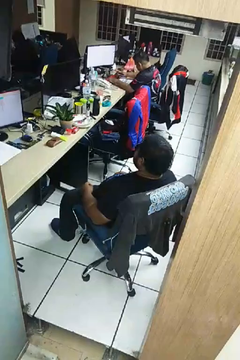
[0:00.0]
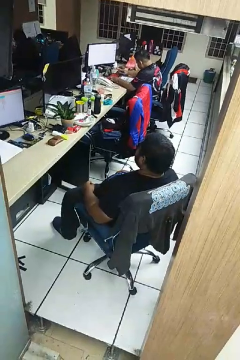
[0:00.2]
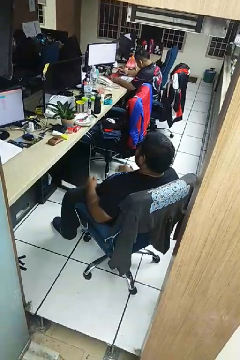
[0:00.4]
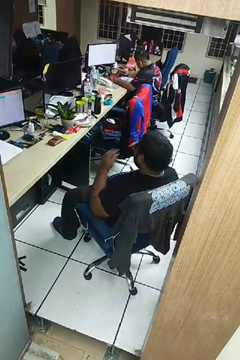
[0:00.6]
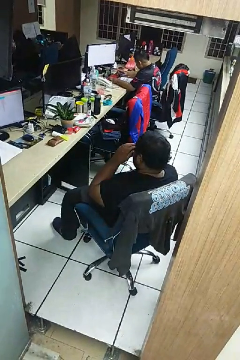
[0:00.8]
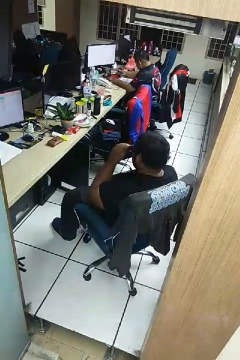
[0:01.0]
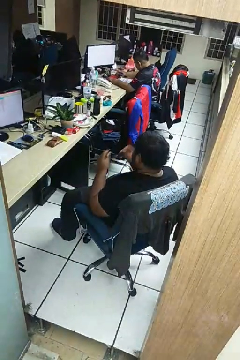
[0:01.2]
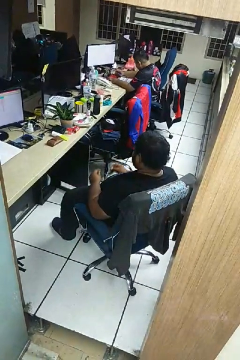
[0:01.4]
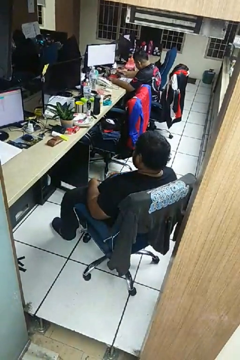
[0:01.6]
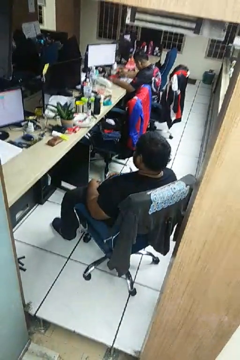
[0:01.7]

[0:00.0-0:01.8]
person takes off sunglasses

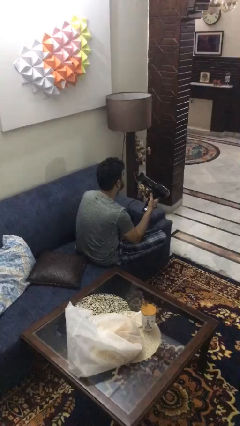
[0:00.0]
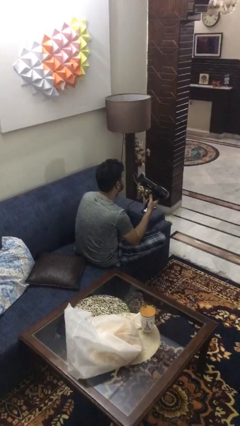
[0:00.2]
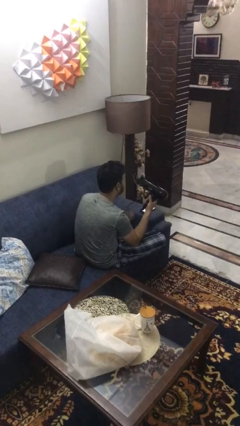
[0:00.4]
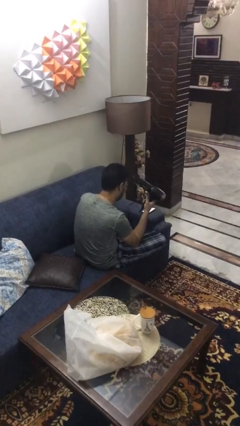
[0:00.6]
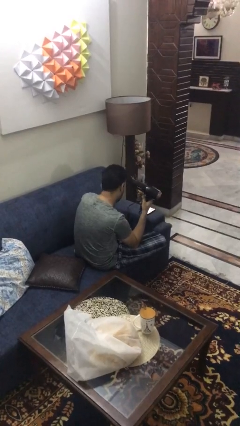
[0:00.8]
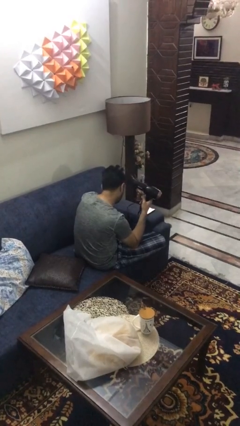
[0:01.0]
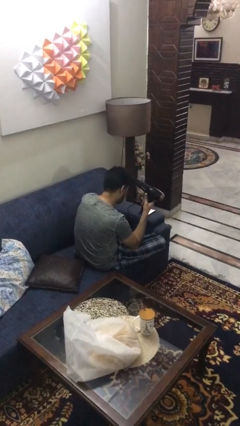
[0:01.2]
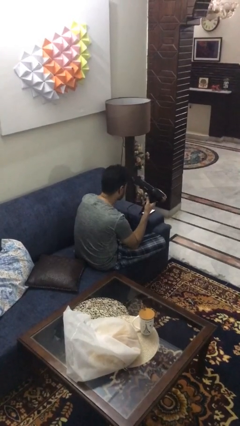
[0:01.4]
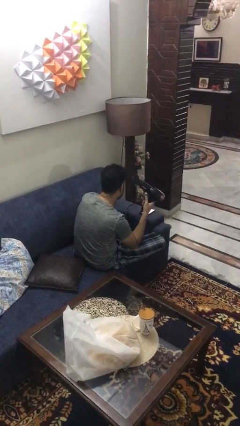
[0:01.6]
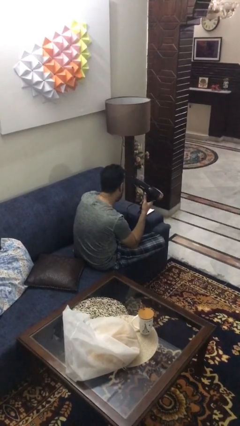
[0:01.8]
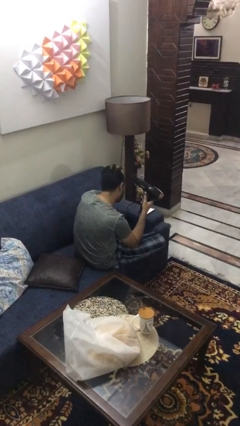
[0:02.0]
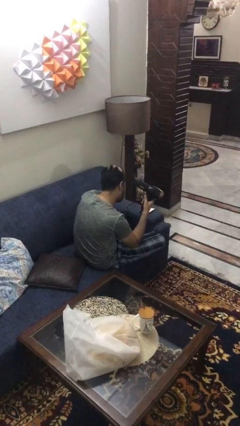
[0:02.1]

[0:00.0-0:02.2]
person dries hair with hairdryer

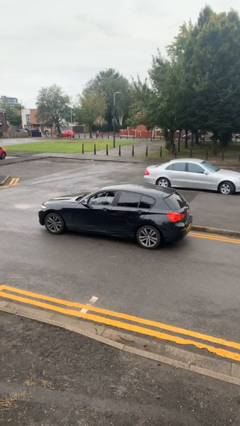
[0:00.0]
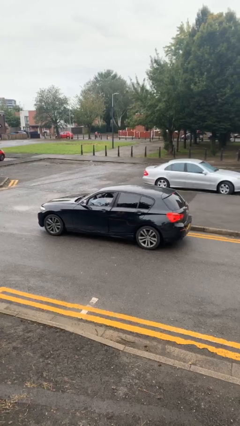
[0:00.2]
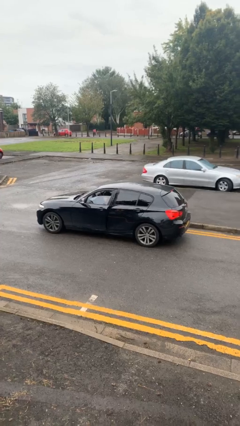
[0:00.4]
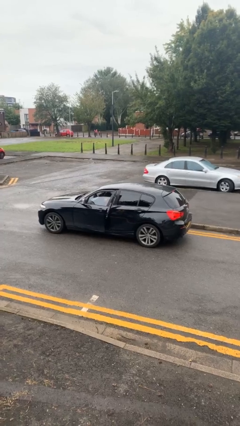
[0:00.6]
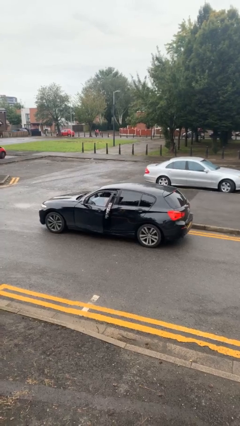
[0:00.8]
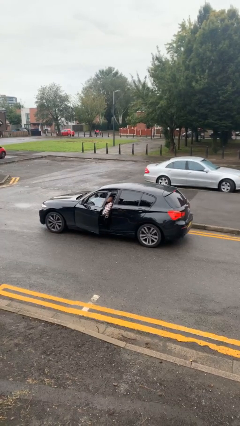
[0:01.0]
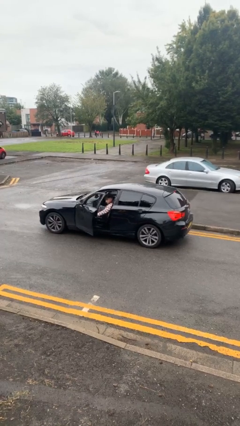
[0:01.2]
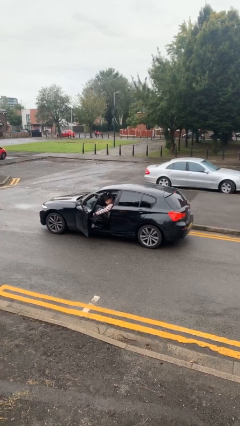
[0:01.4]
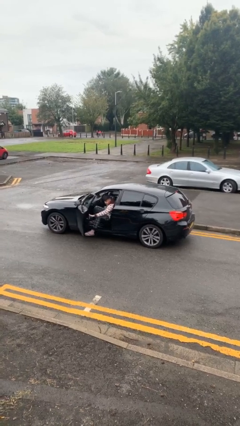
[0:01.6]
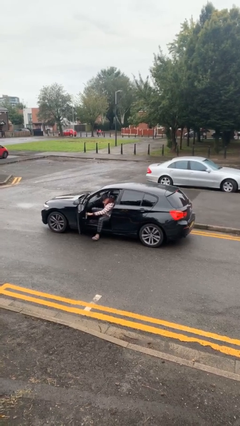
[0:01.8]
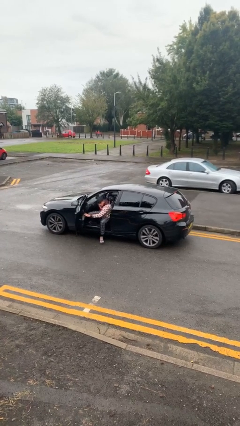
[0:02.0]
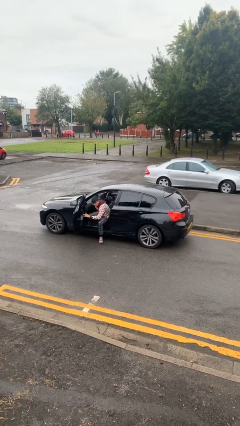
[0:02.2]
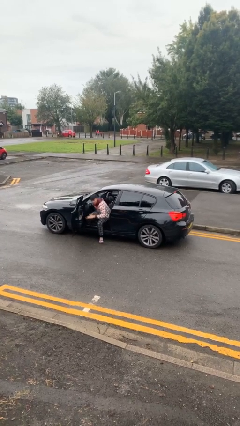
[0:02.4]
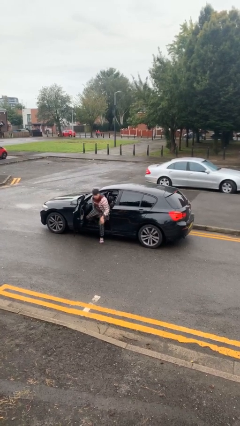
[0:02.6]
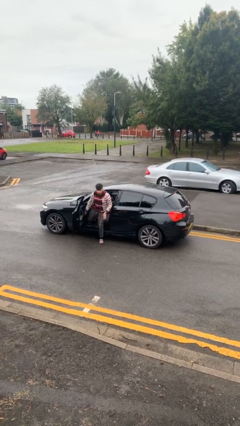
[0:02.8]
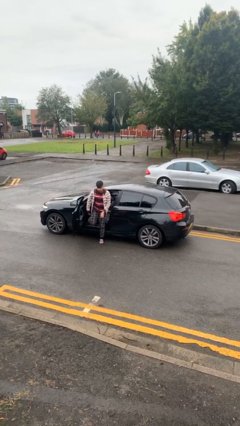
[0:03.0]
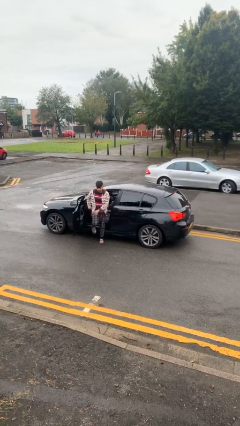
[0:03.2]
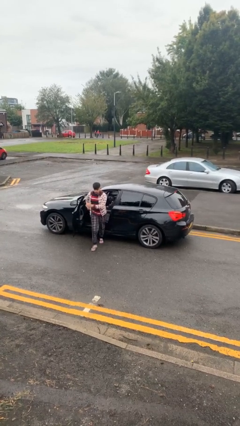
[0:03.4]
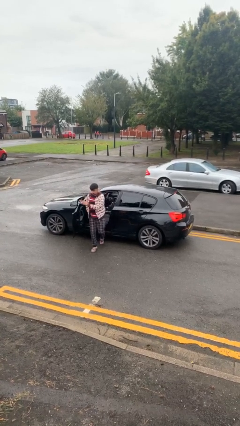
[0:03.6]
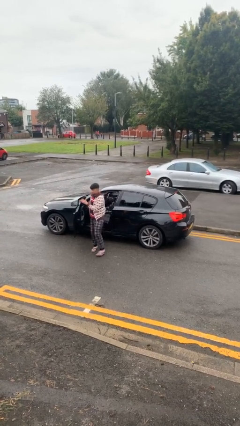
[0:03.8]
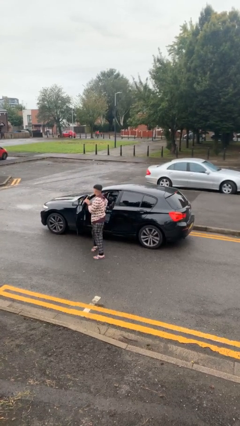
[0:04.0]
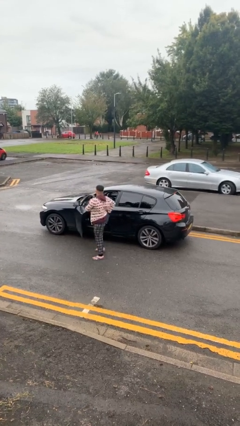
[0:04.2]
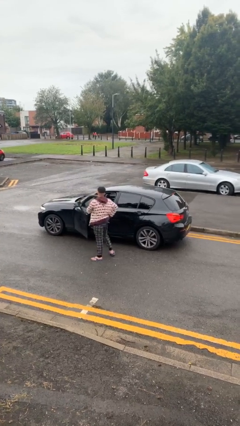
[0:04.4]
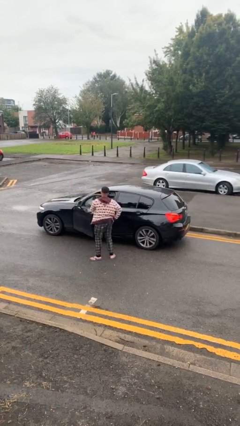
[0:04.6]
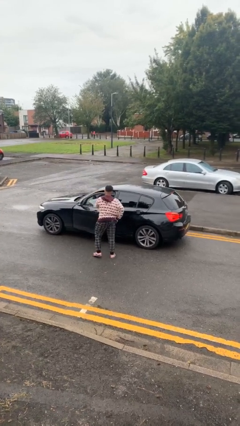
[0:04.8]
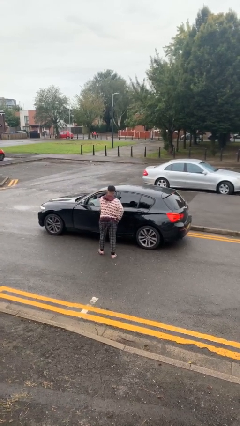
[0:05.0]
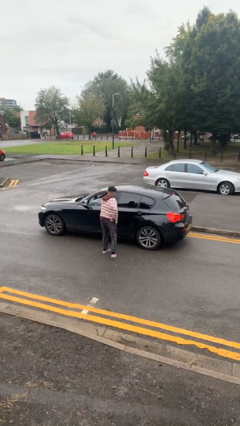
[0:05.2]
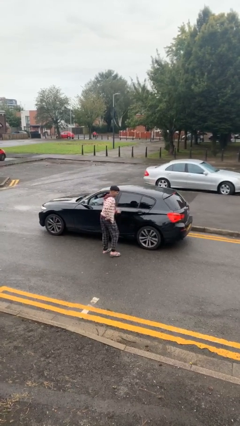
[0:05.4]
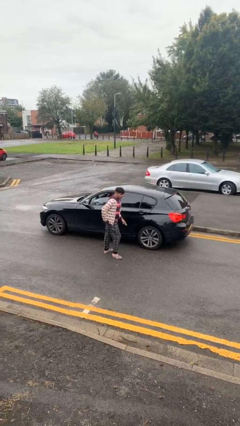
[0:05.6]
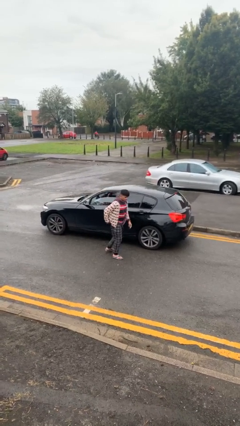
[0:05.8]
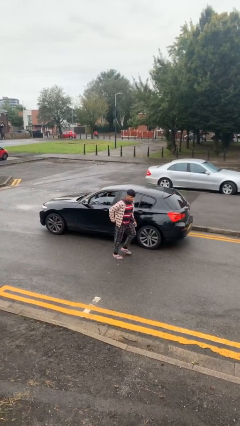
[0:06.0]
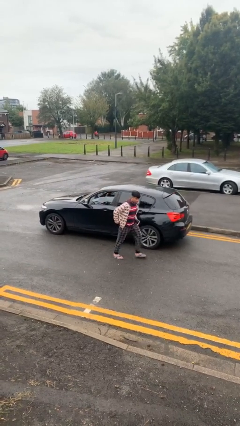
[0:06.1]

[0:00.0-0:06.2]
car drops off person

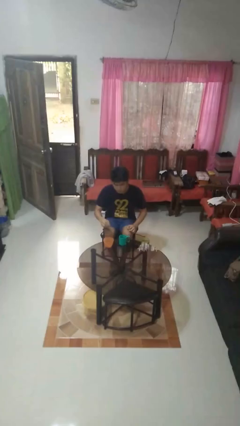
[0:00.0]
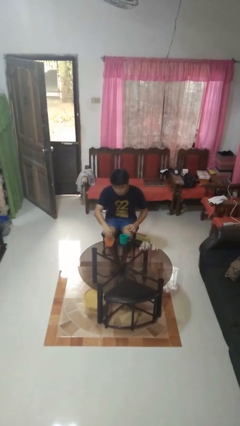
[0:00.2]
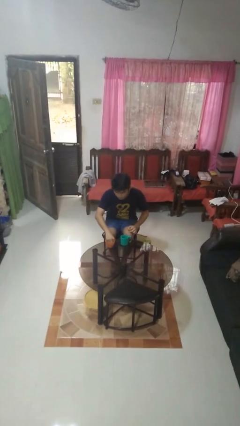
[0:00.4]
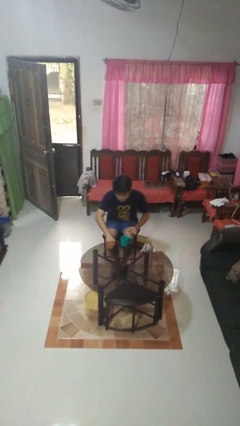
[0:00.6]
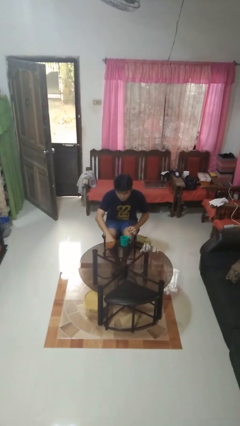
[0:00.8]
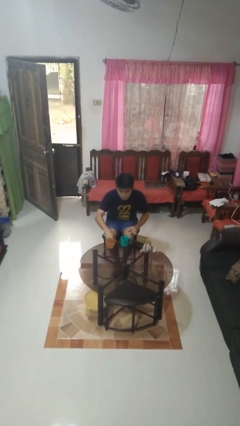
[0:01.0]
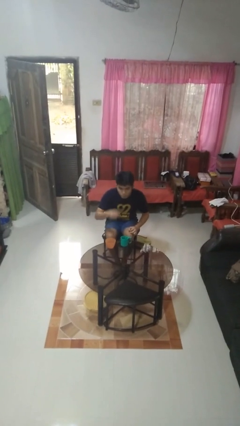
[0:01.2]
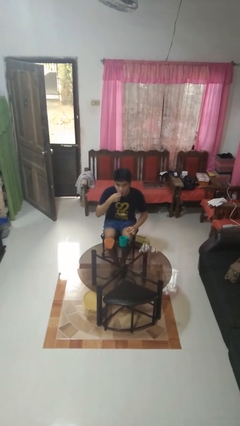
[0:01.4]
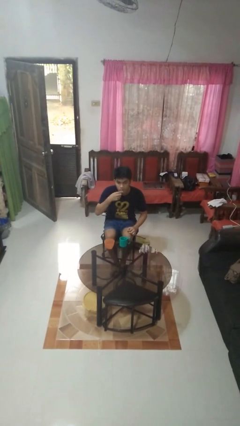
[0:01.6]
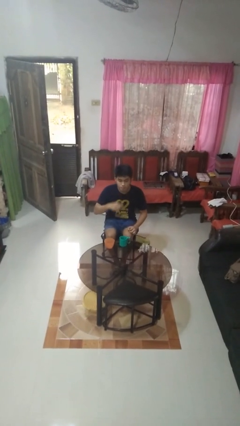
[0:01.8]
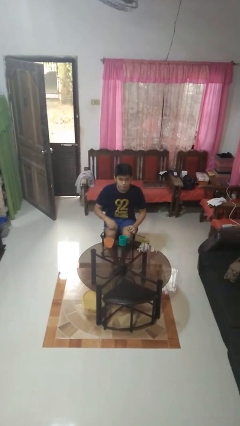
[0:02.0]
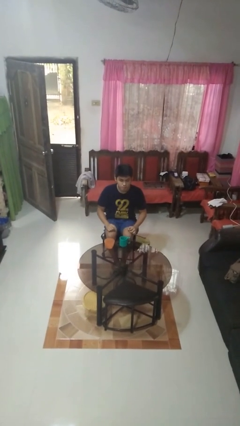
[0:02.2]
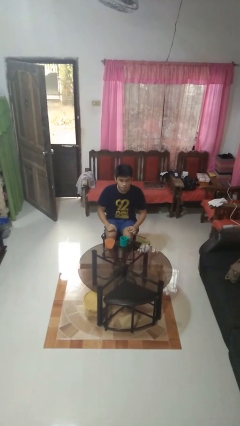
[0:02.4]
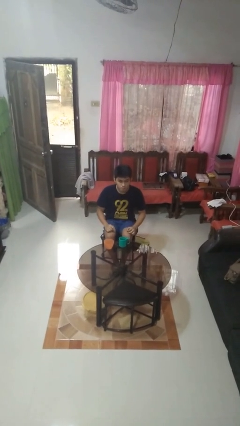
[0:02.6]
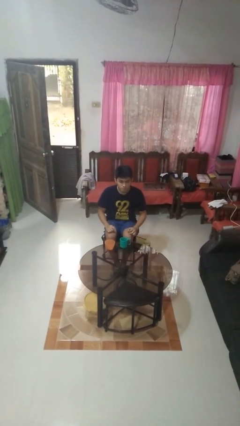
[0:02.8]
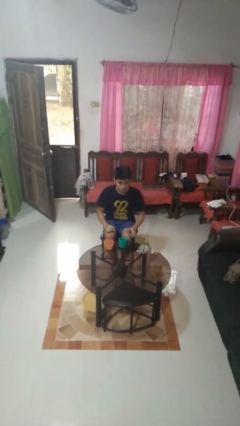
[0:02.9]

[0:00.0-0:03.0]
person takes medicine pills

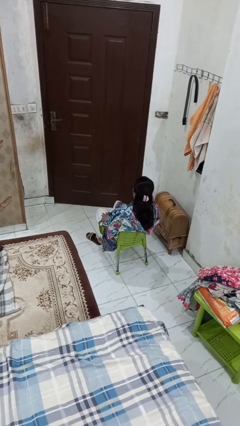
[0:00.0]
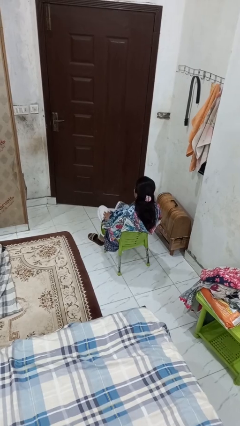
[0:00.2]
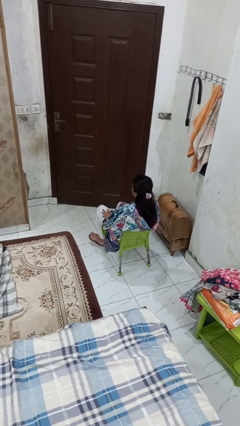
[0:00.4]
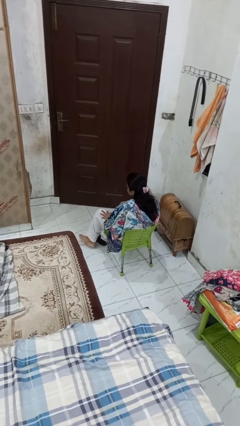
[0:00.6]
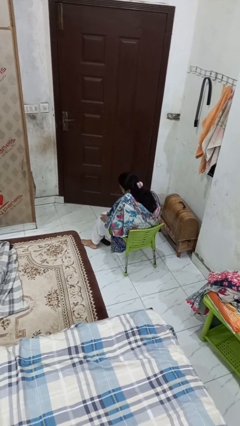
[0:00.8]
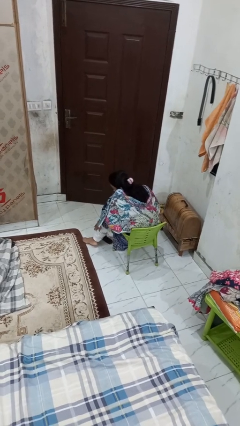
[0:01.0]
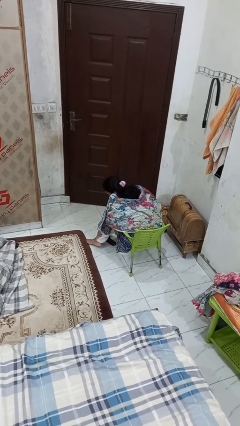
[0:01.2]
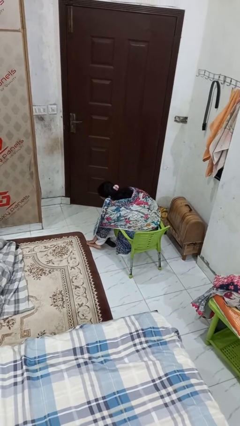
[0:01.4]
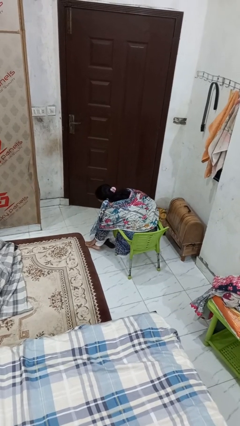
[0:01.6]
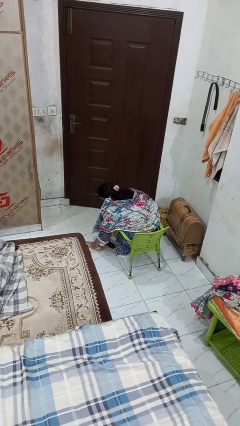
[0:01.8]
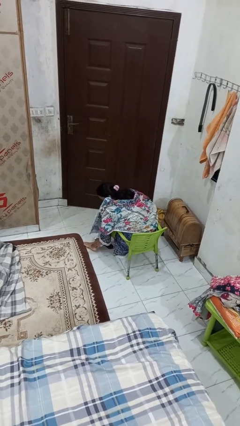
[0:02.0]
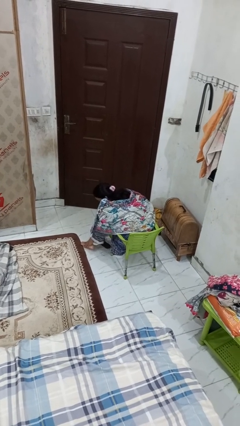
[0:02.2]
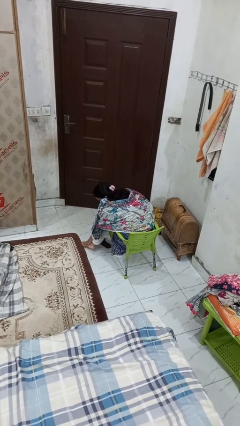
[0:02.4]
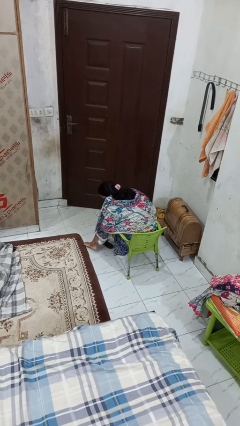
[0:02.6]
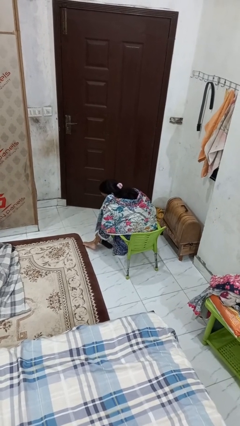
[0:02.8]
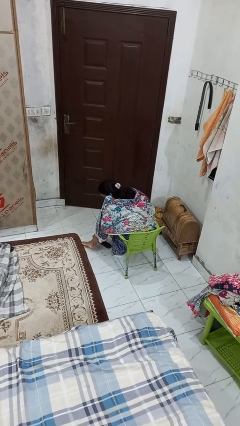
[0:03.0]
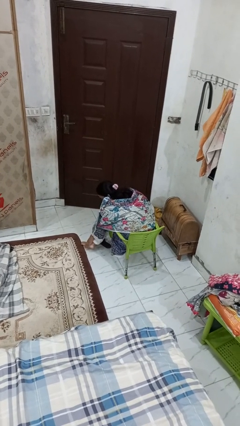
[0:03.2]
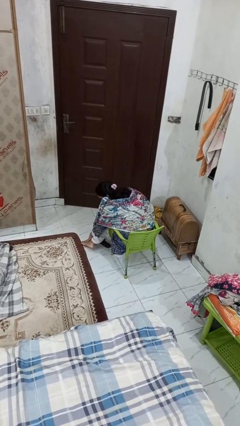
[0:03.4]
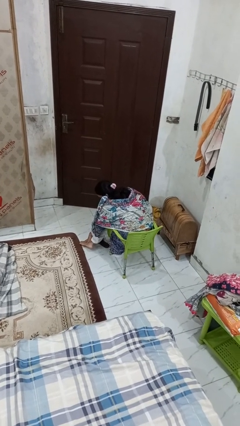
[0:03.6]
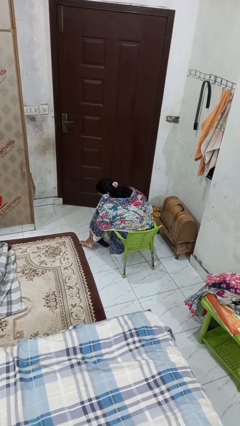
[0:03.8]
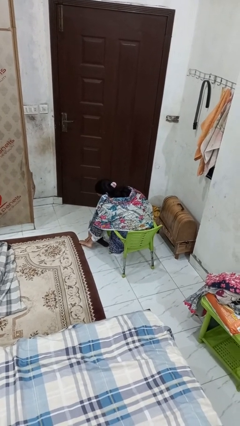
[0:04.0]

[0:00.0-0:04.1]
person rubs foot

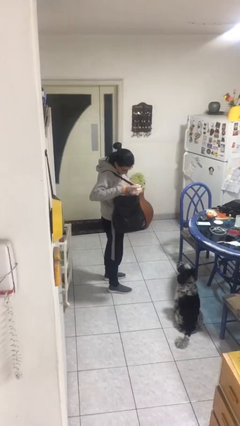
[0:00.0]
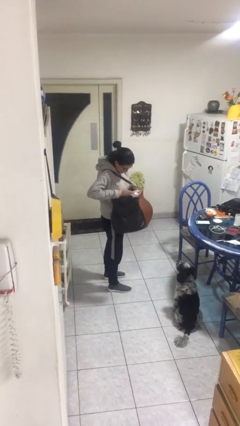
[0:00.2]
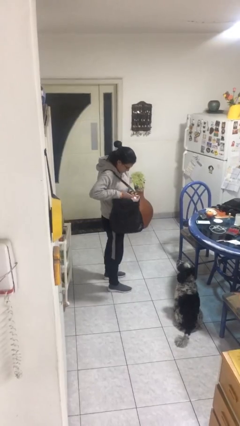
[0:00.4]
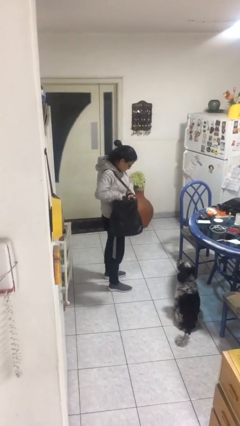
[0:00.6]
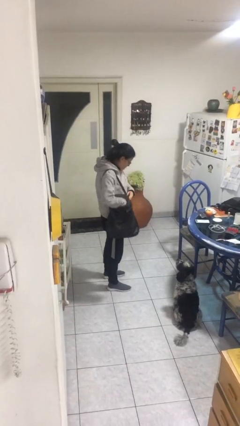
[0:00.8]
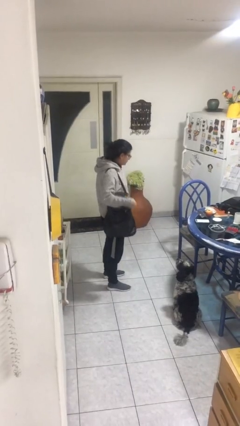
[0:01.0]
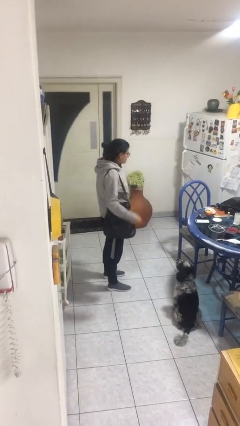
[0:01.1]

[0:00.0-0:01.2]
person puts object into purse
